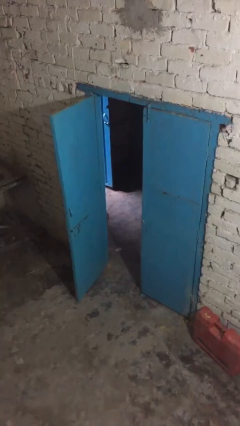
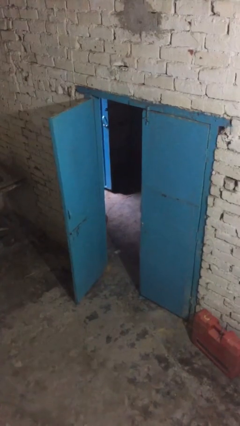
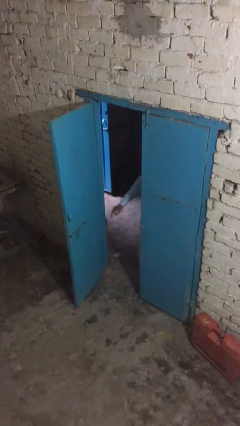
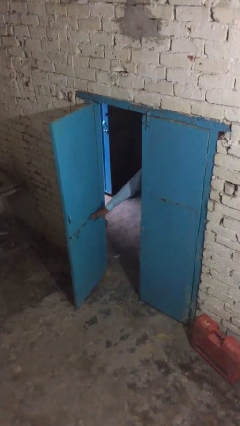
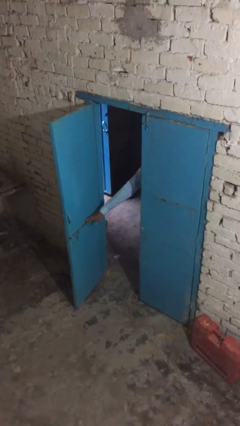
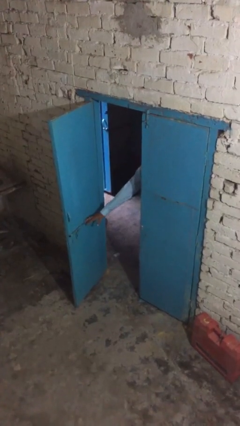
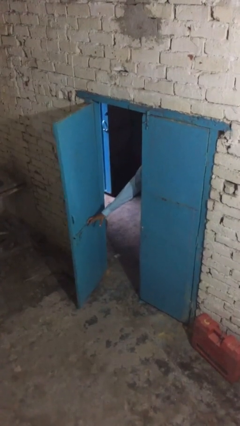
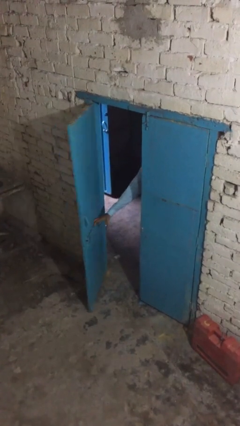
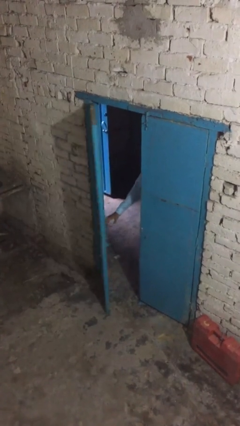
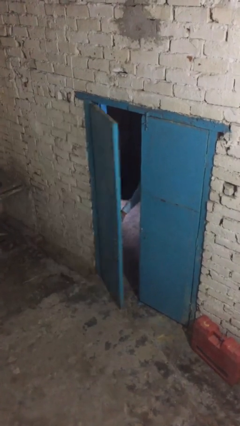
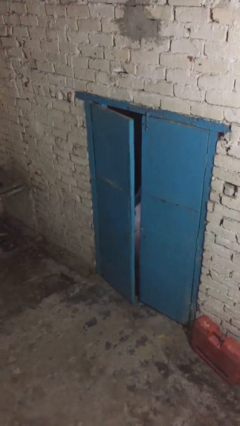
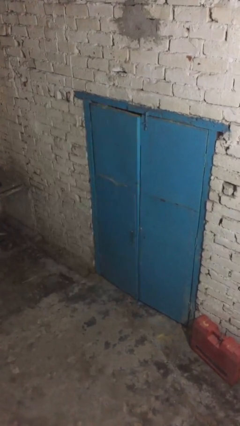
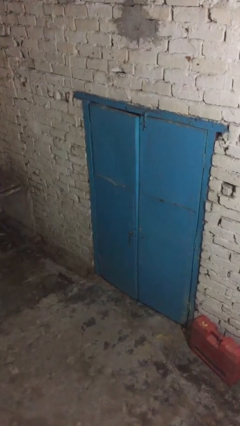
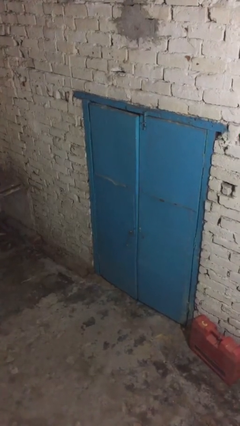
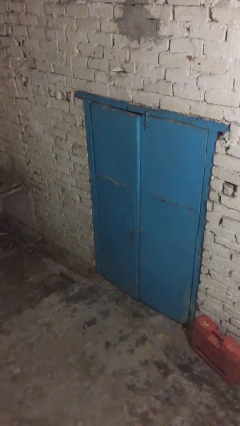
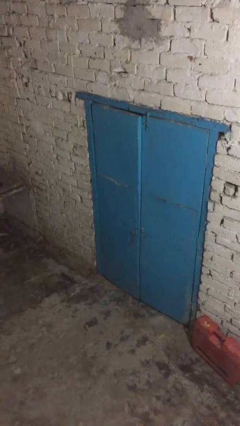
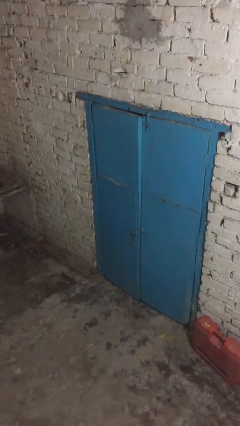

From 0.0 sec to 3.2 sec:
person closes facility door

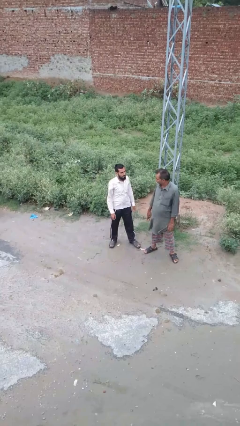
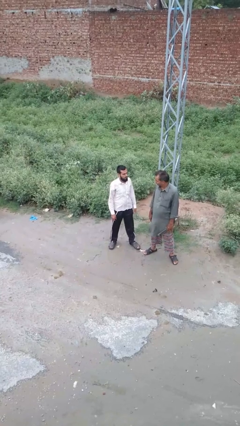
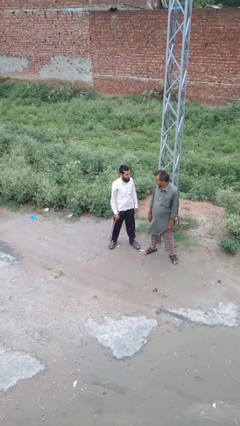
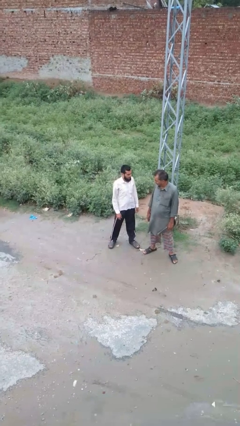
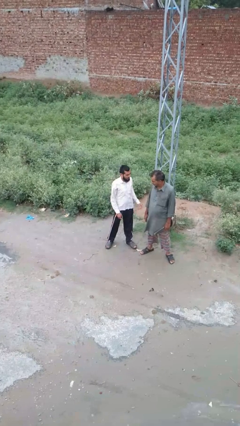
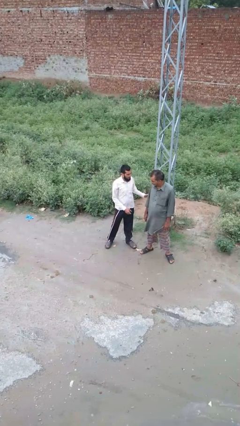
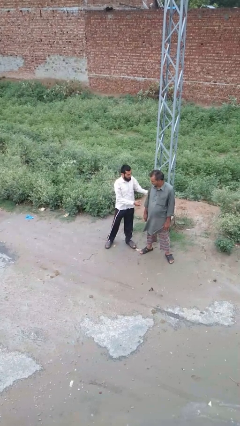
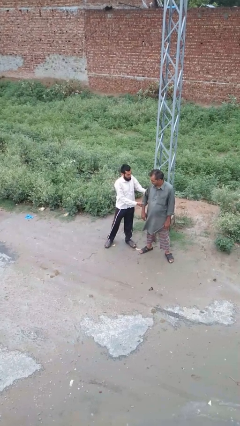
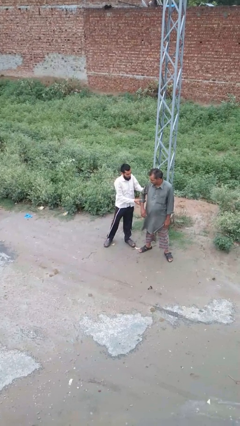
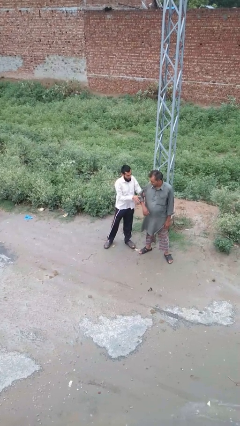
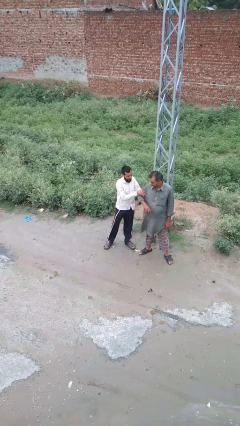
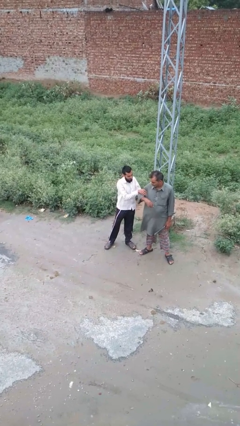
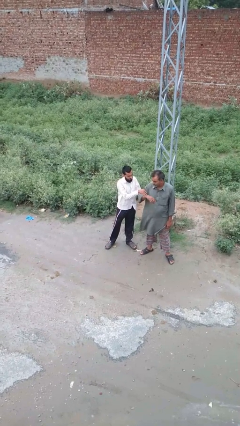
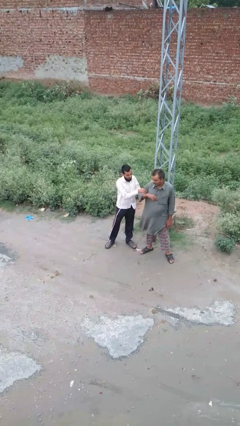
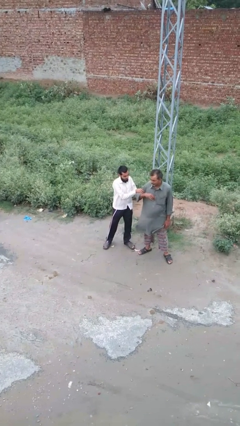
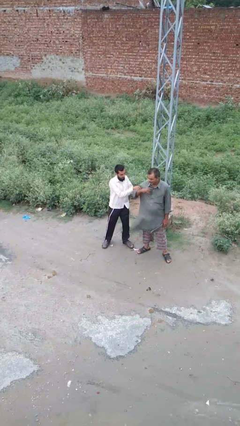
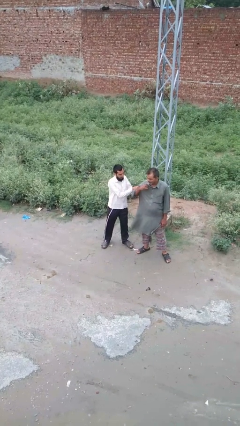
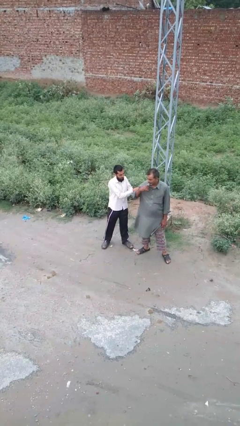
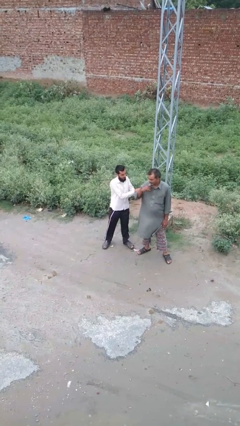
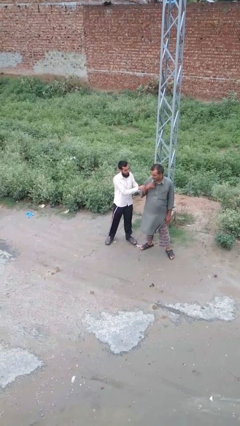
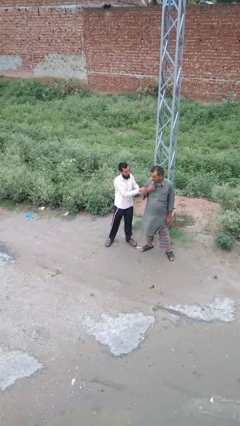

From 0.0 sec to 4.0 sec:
person grabs person by bicep

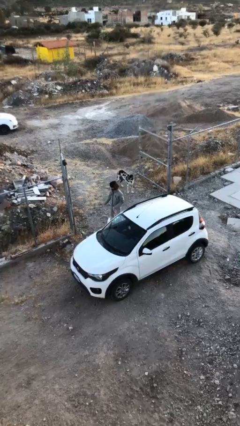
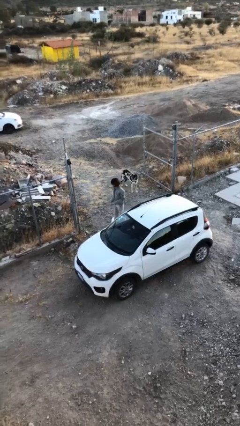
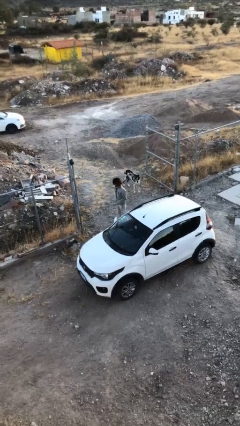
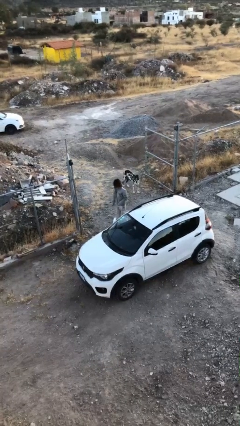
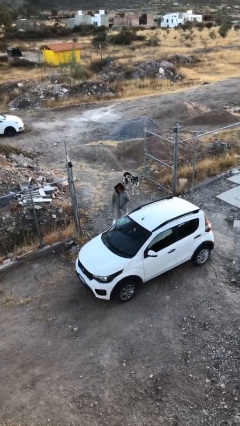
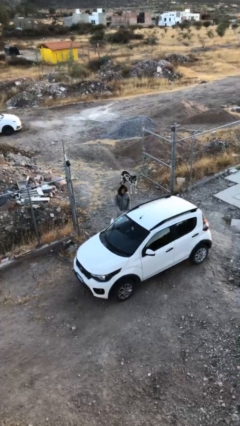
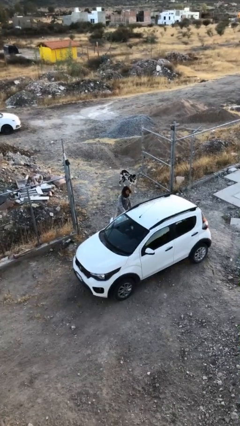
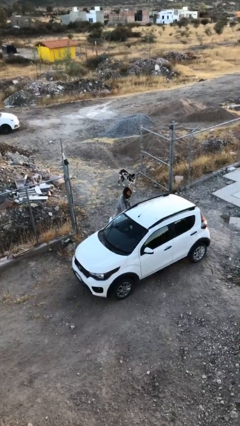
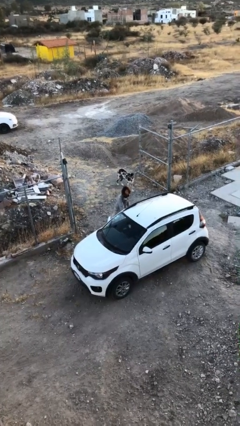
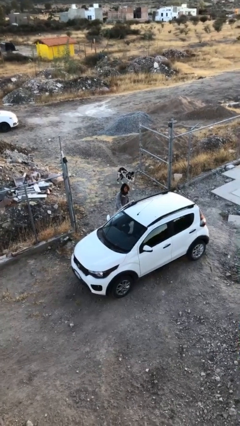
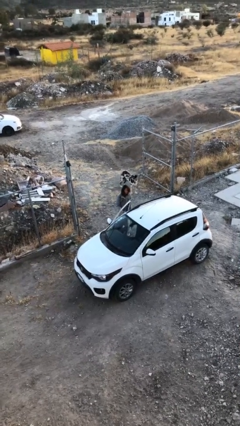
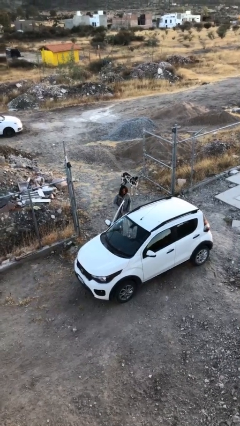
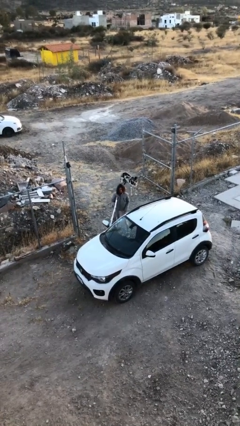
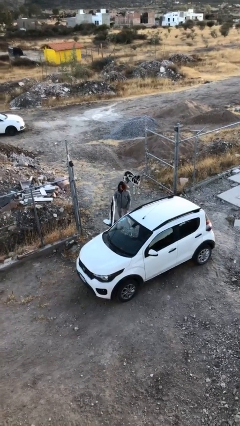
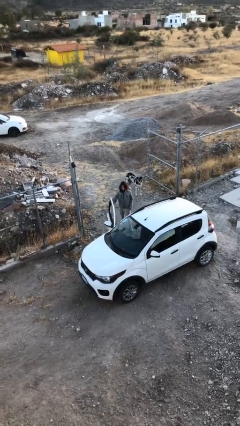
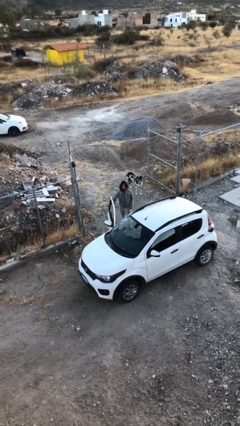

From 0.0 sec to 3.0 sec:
person opens car door

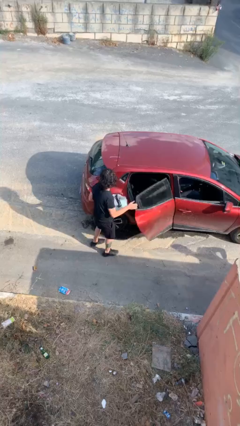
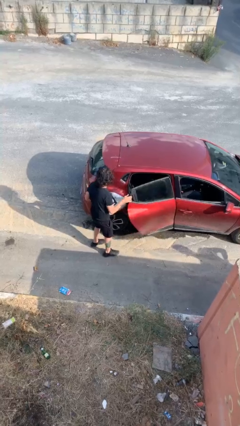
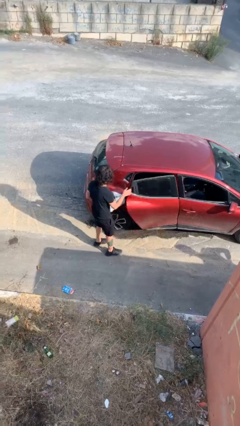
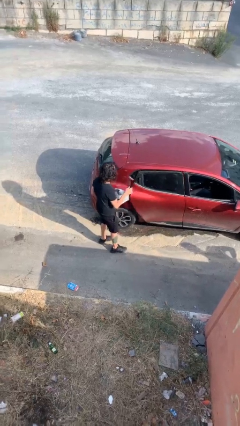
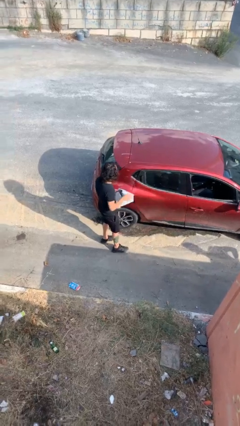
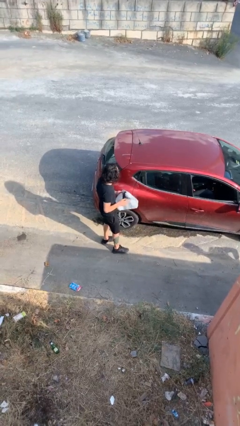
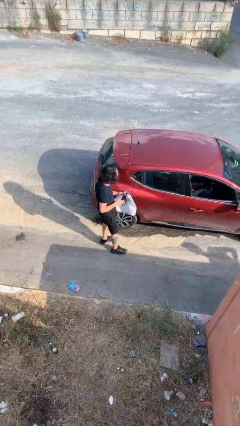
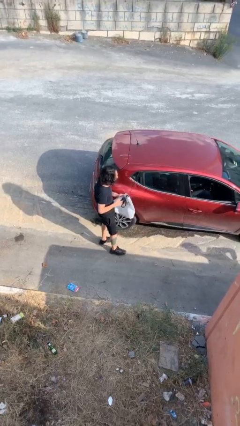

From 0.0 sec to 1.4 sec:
person closes car door

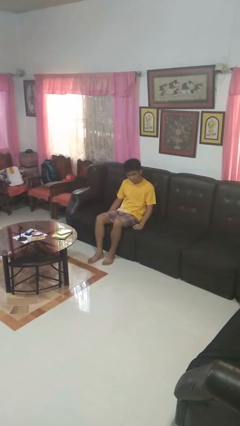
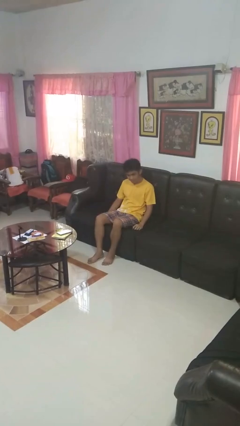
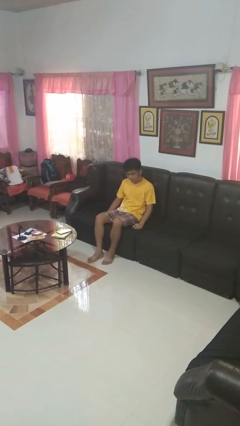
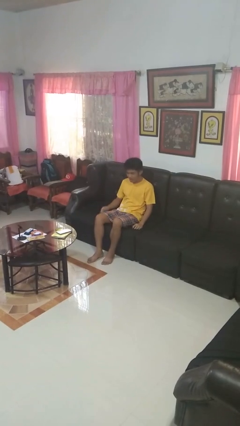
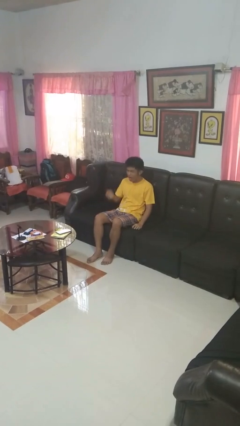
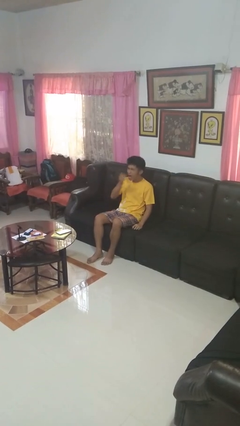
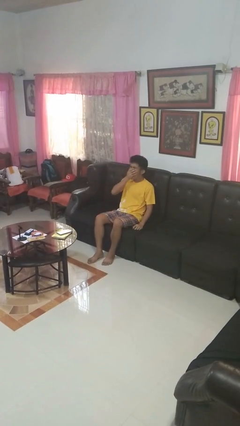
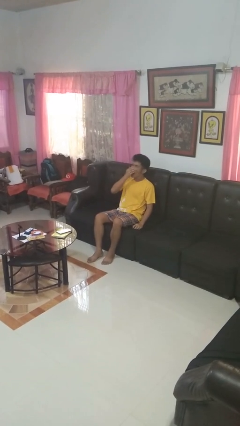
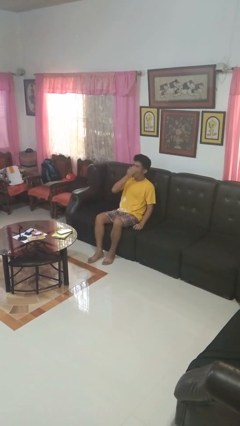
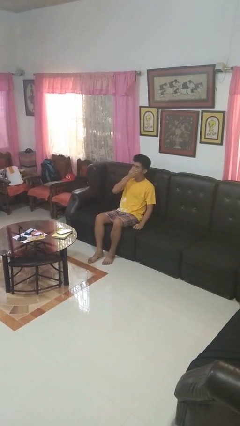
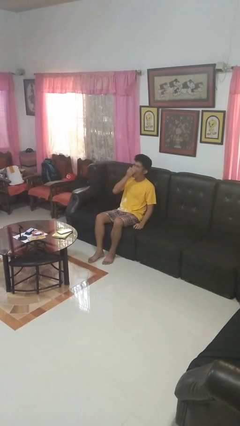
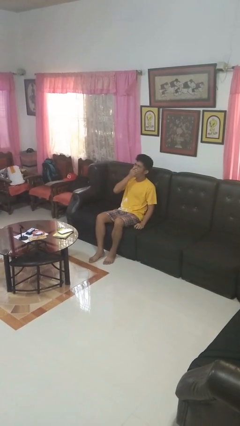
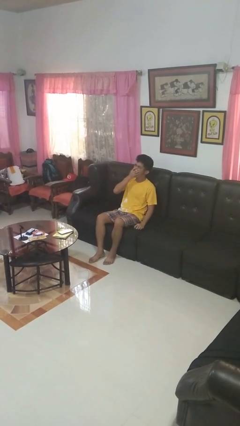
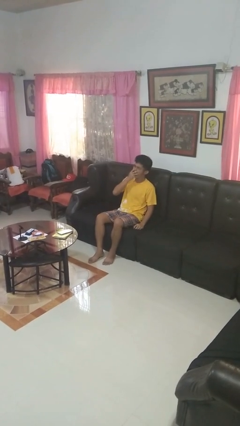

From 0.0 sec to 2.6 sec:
person yawns

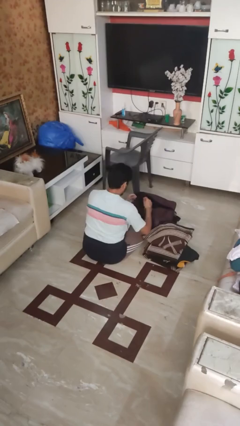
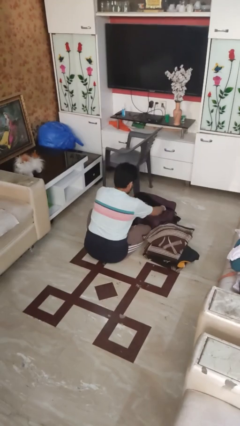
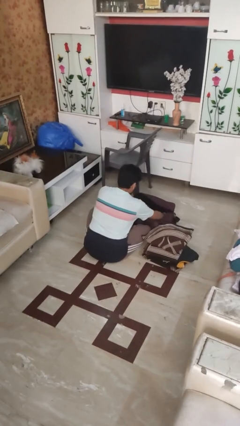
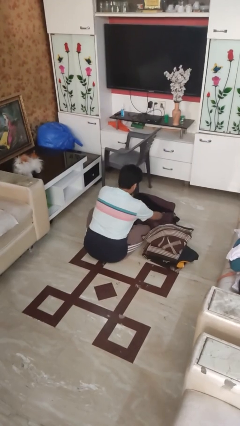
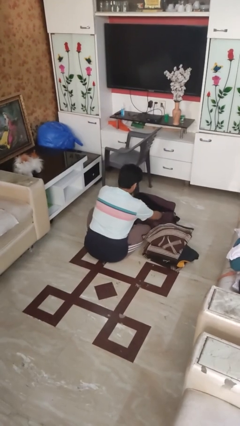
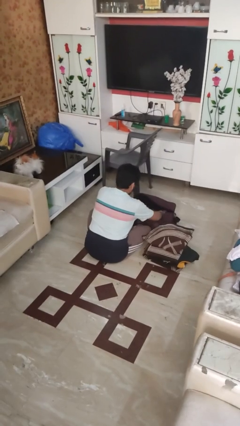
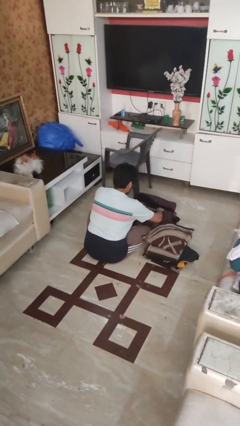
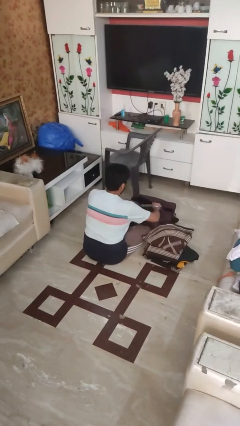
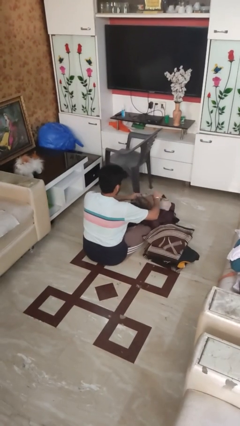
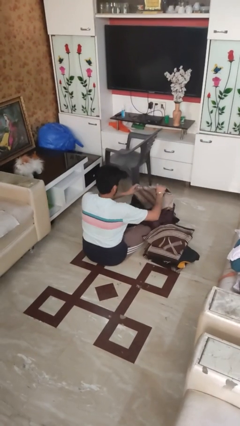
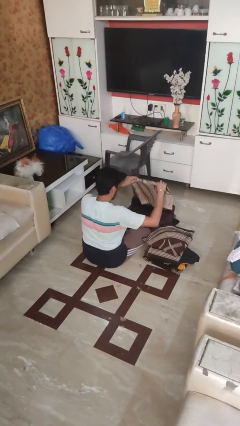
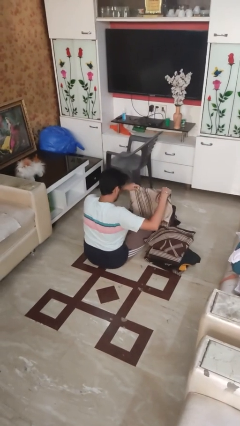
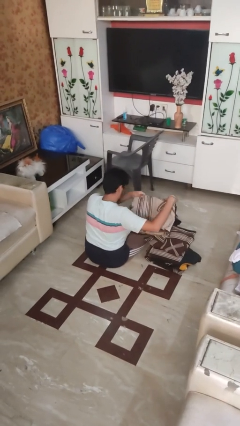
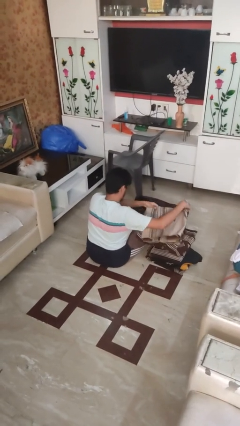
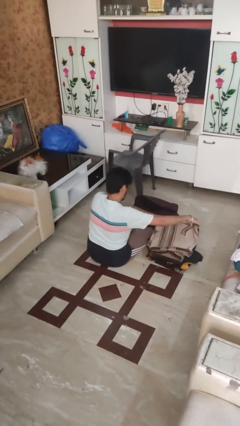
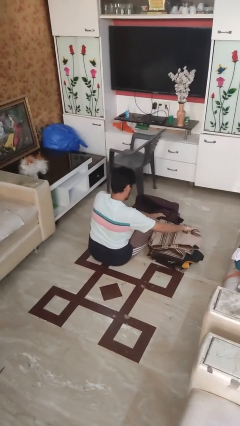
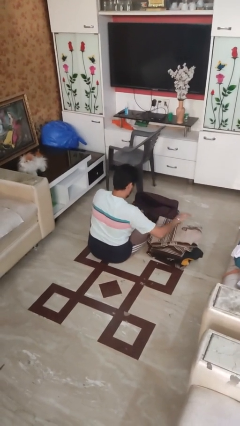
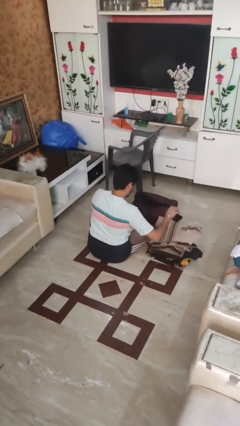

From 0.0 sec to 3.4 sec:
person unloads clothes from suitcase
